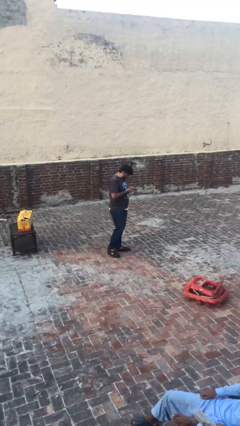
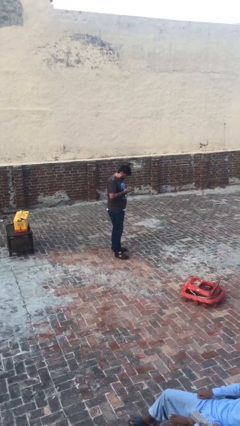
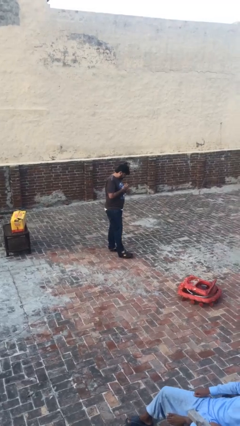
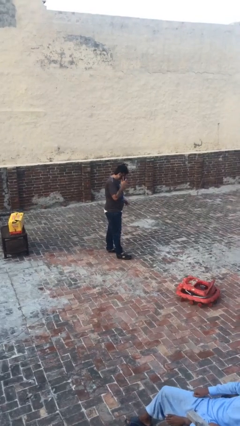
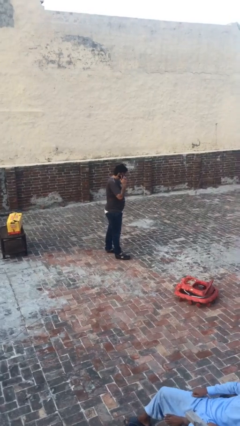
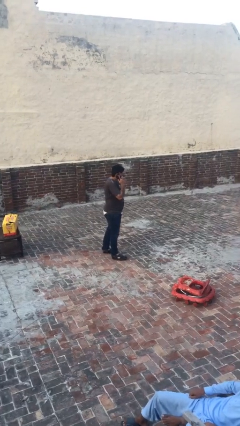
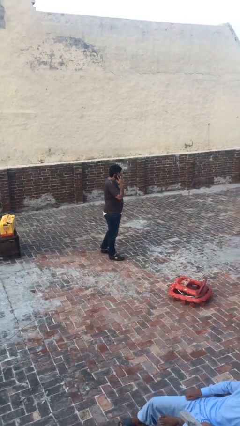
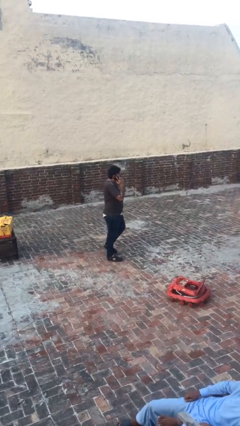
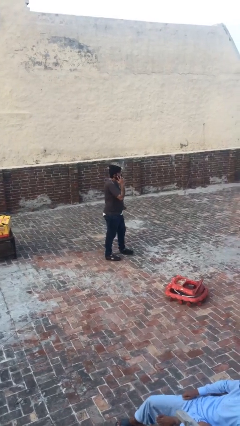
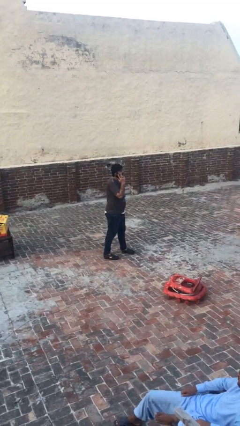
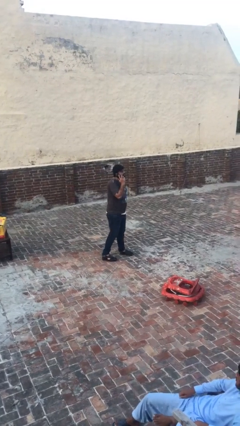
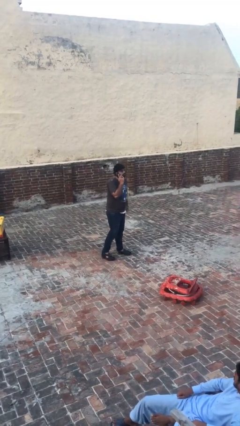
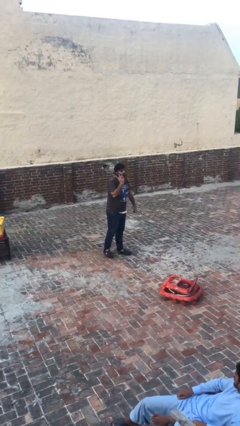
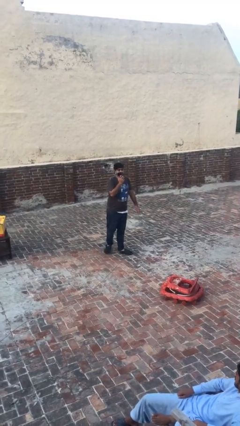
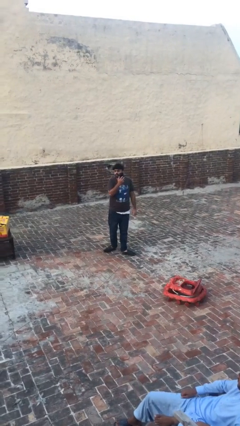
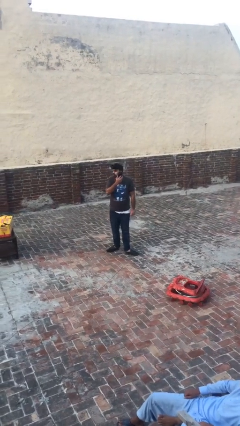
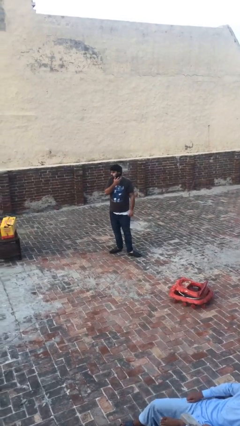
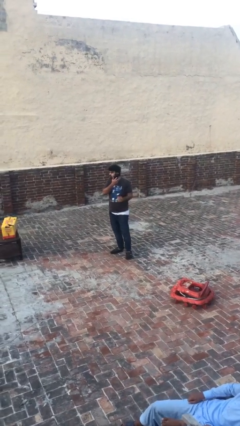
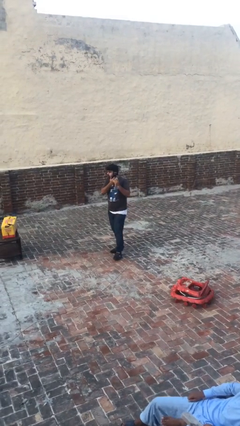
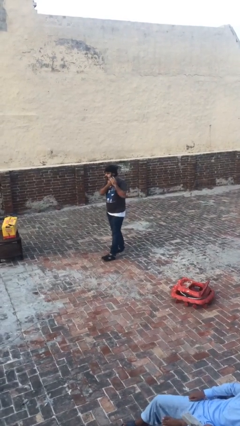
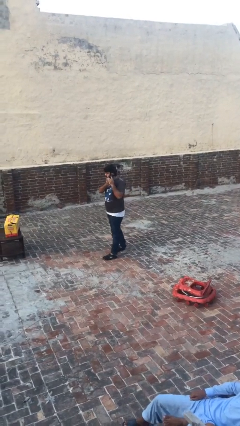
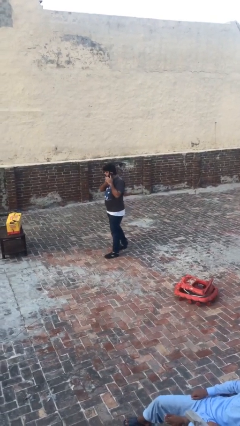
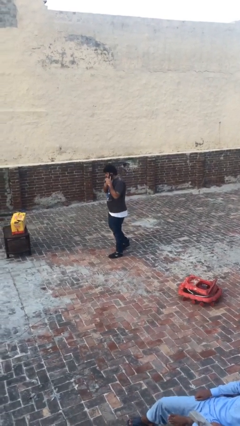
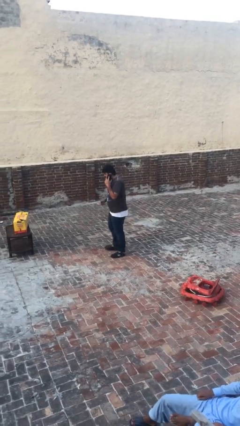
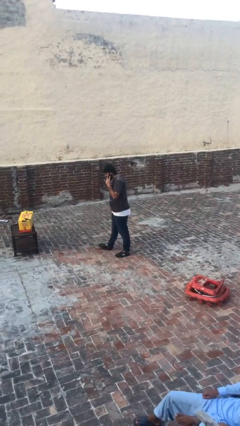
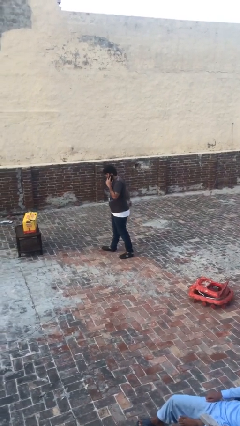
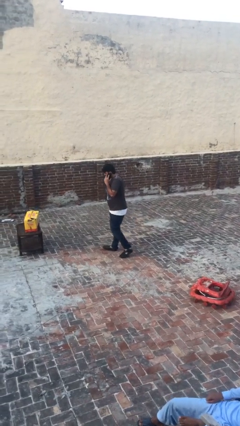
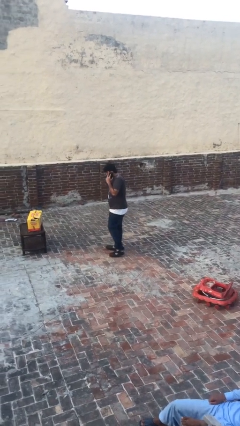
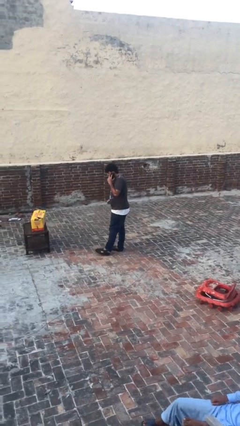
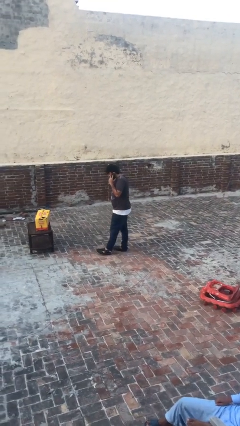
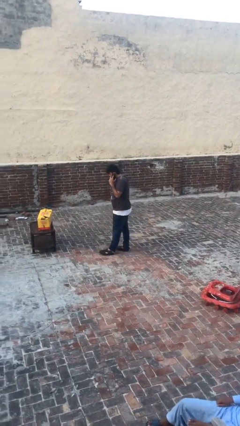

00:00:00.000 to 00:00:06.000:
person talks on phone

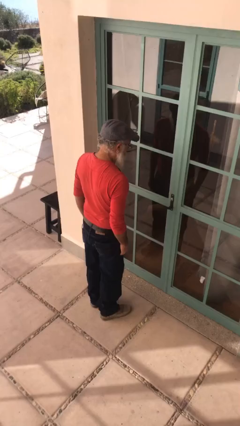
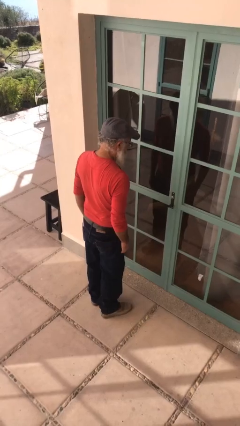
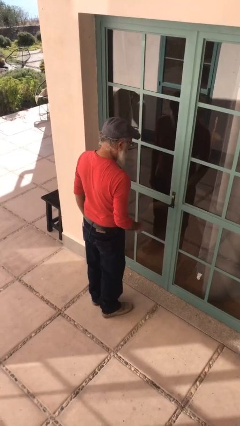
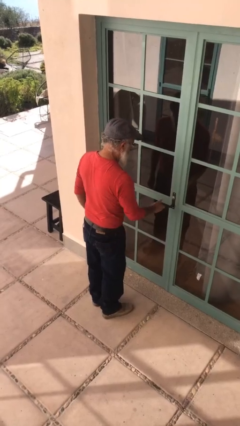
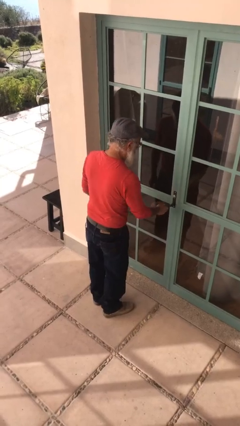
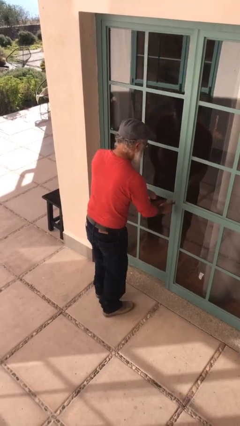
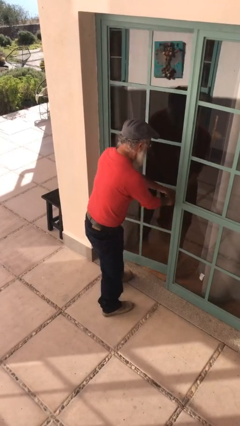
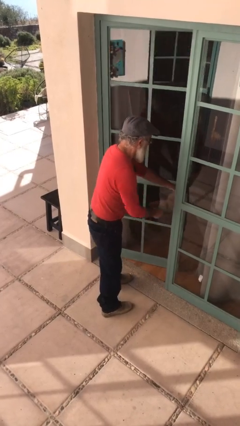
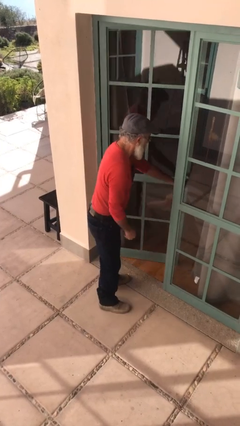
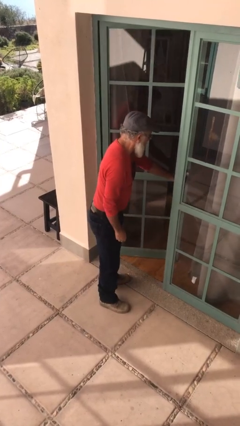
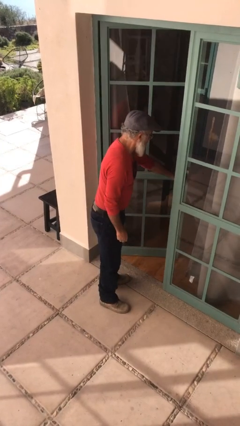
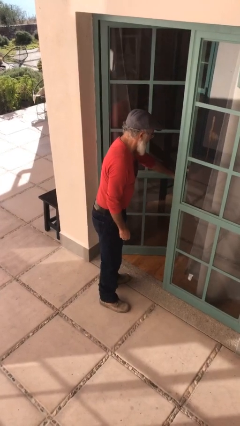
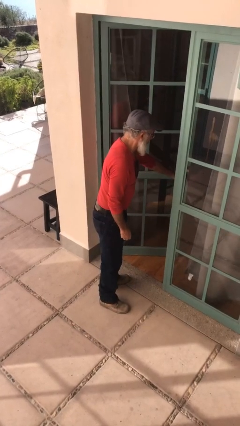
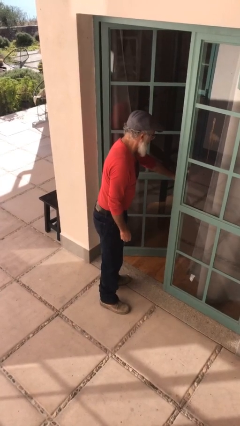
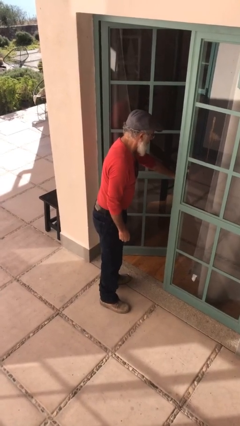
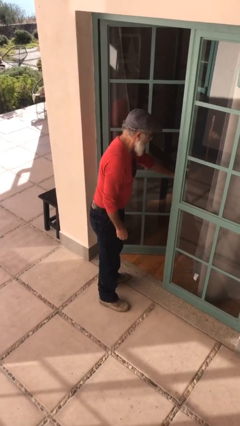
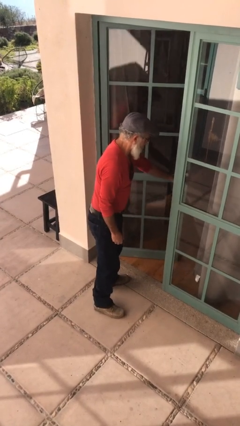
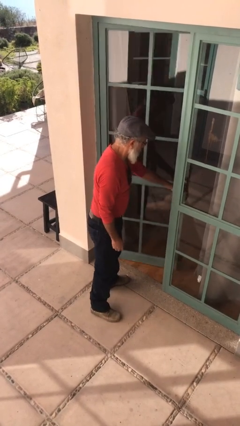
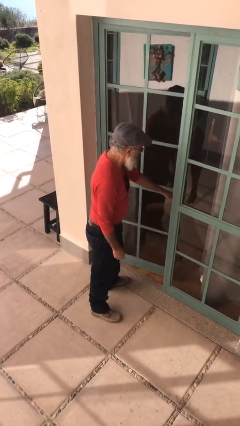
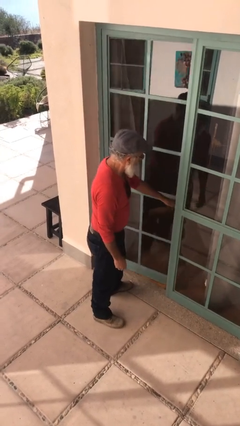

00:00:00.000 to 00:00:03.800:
person opens facility door

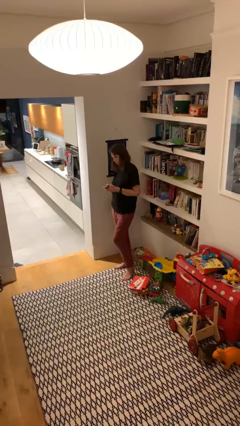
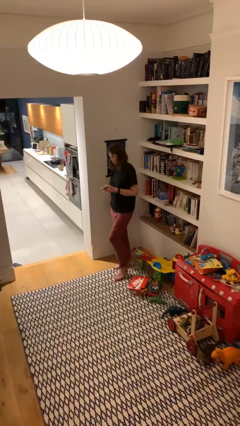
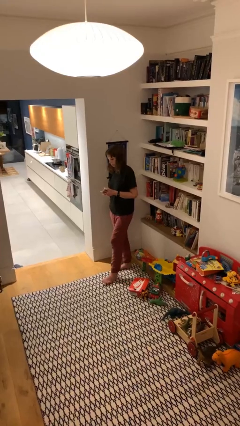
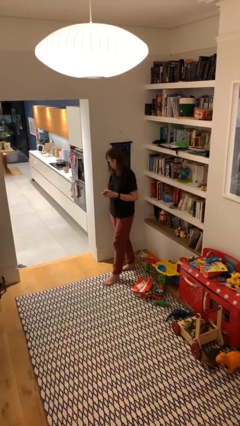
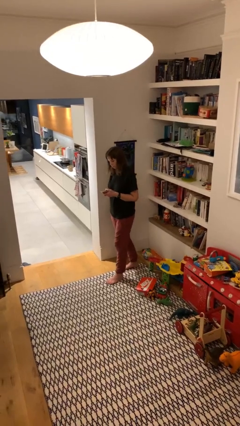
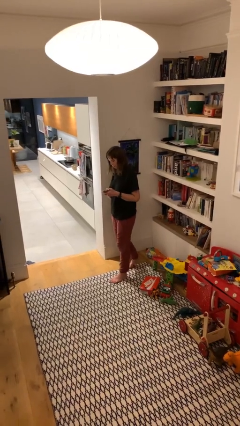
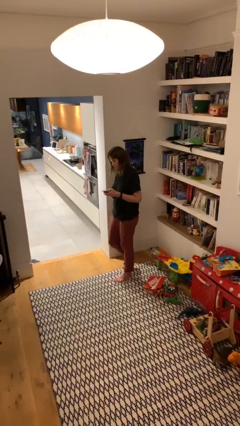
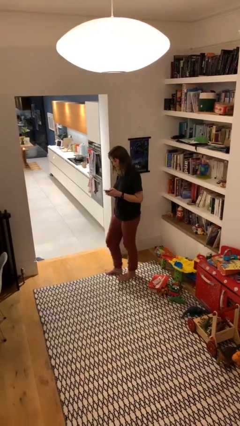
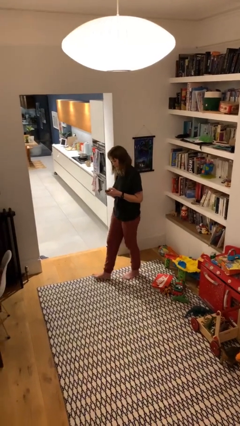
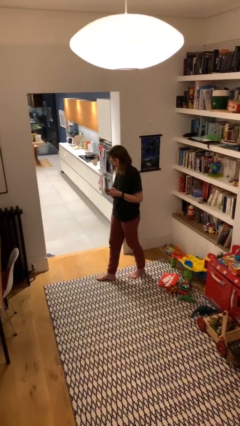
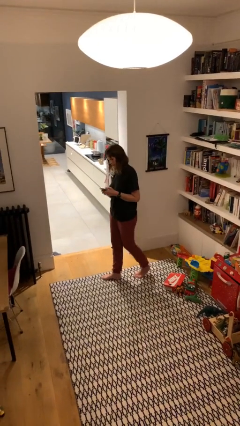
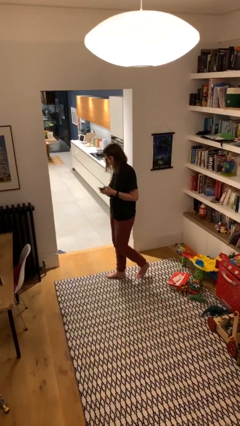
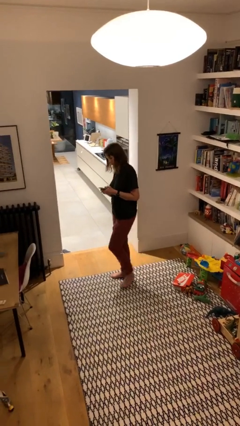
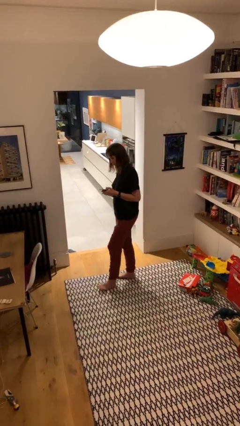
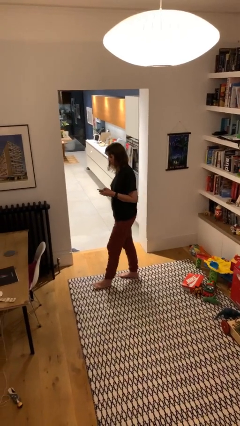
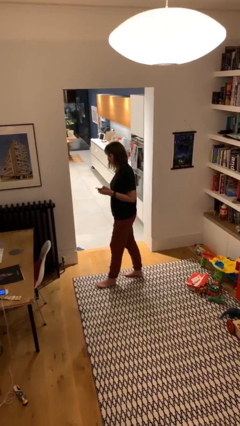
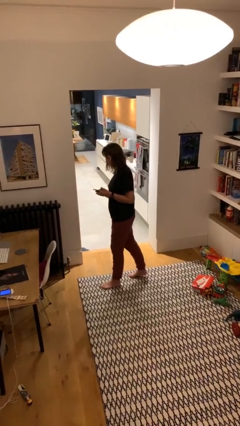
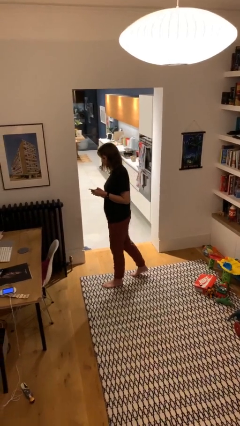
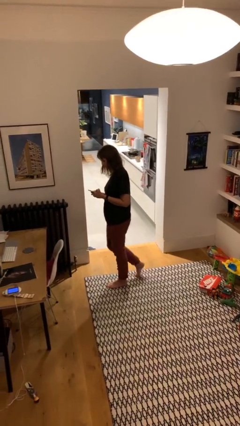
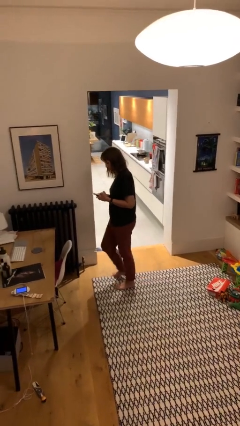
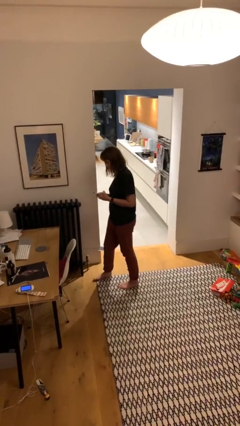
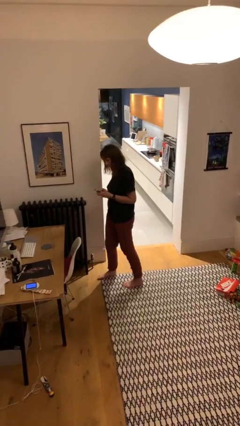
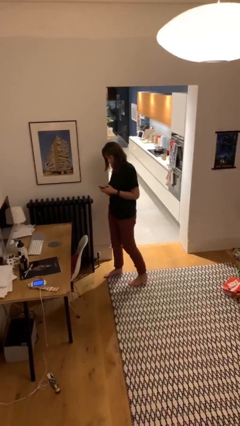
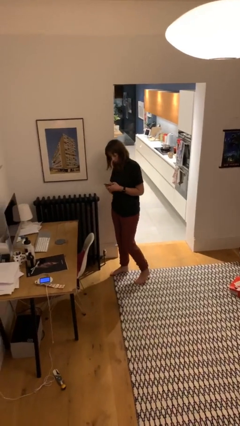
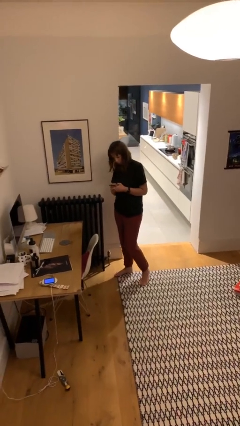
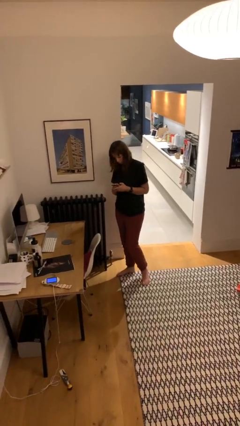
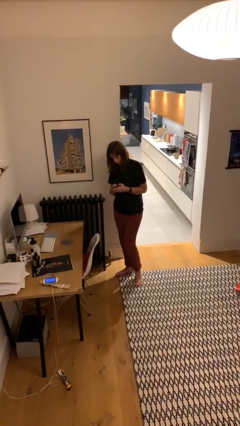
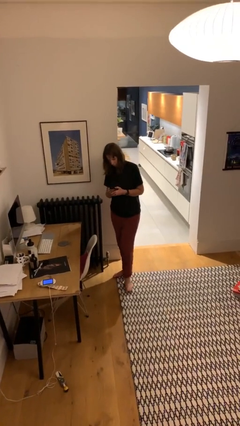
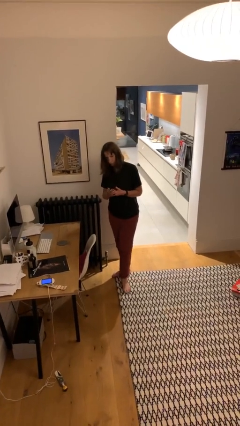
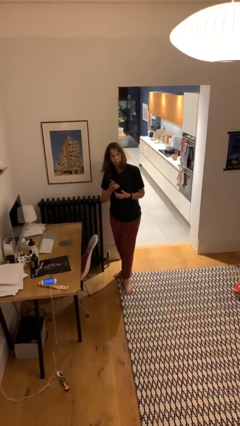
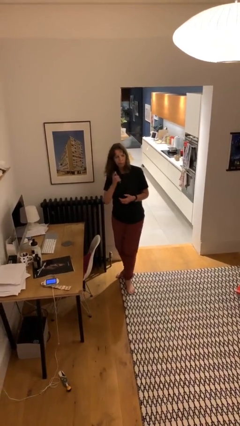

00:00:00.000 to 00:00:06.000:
person texts on phone

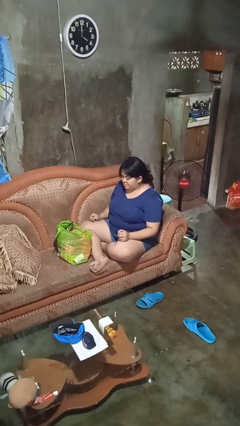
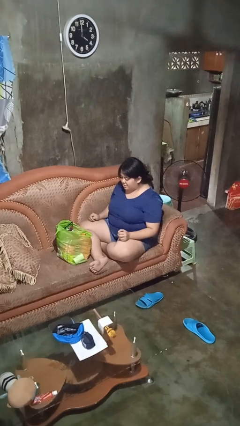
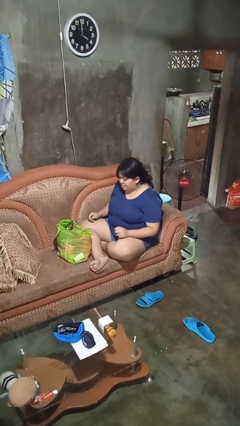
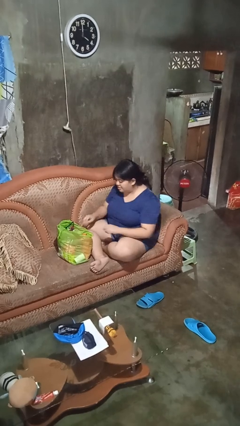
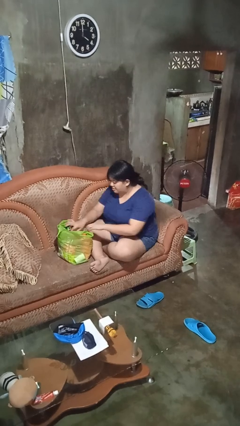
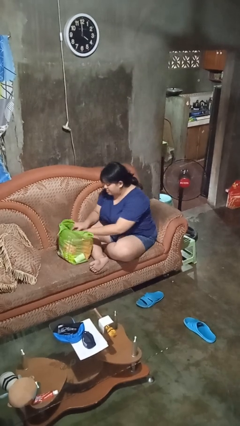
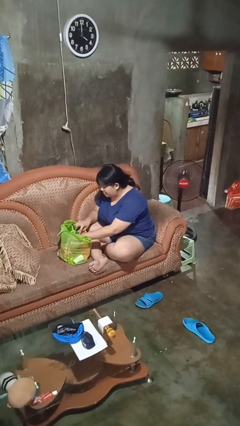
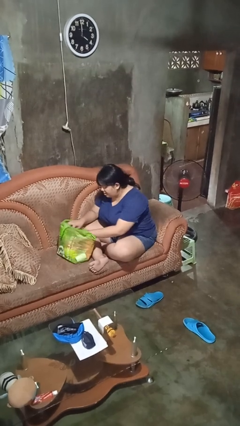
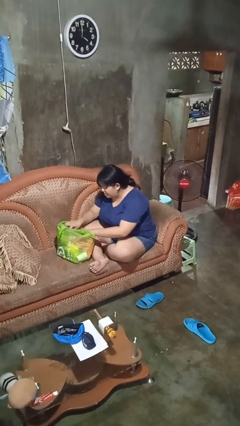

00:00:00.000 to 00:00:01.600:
person searches in bag
